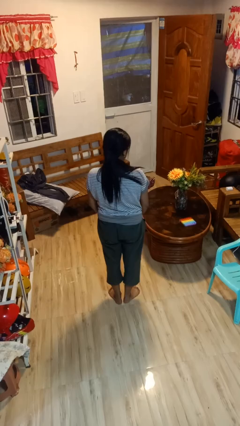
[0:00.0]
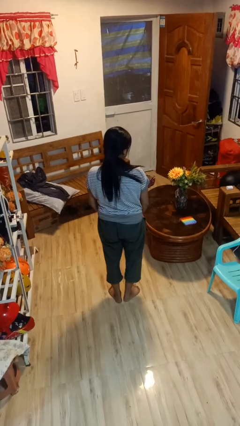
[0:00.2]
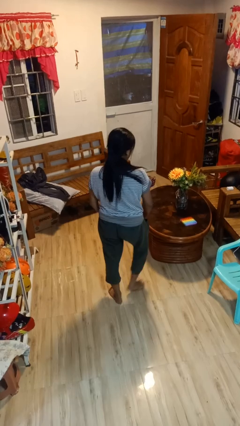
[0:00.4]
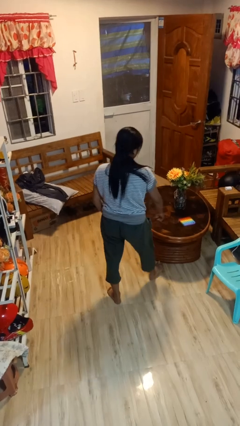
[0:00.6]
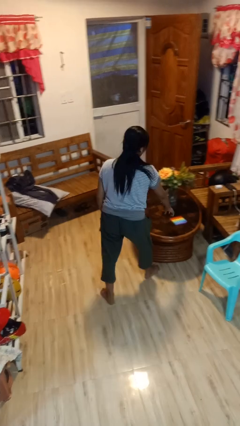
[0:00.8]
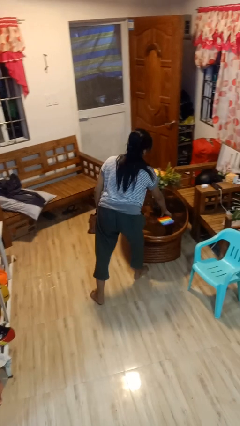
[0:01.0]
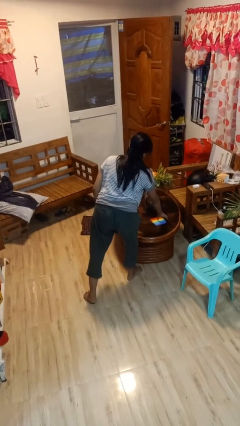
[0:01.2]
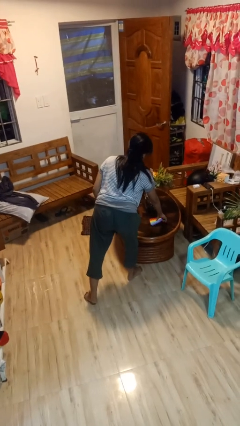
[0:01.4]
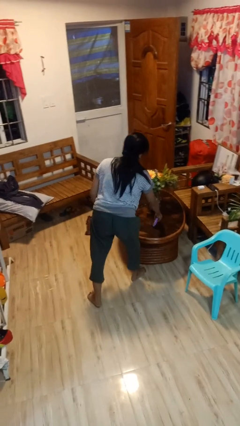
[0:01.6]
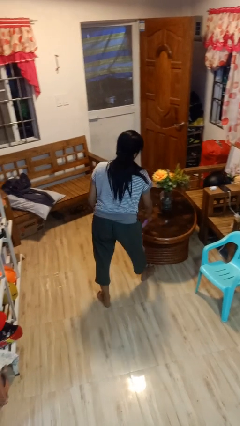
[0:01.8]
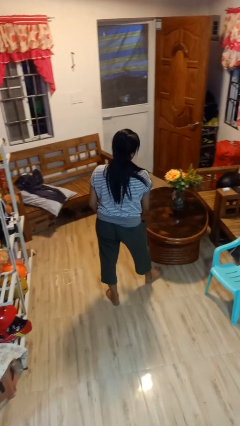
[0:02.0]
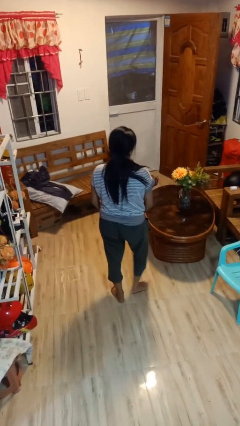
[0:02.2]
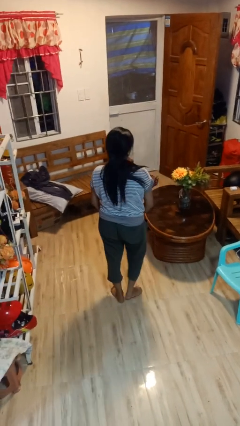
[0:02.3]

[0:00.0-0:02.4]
person picks up object from table

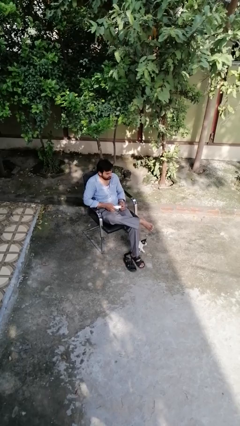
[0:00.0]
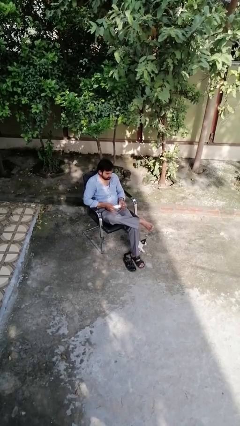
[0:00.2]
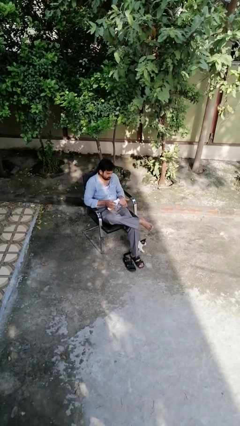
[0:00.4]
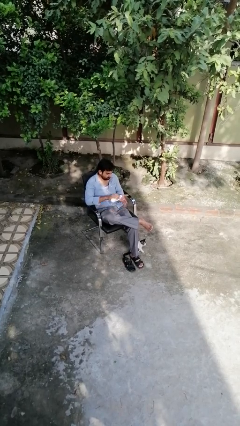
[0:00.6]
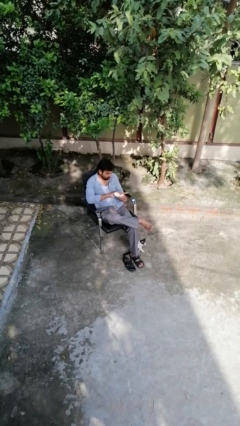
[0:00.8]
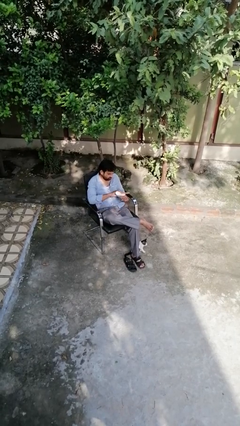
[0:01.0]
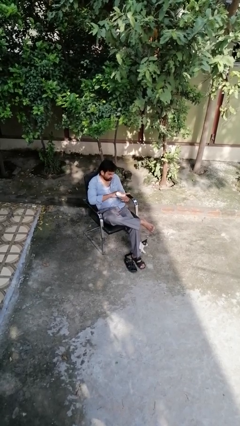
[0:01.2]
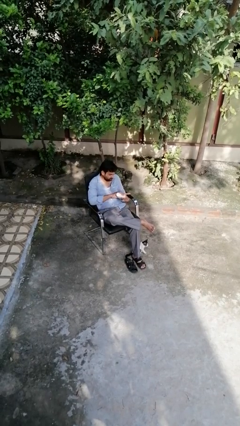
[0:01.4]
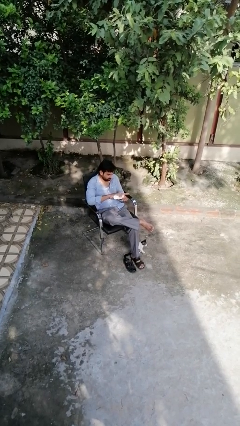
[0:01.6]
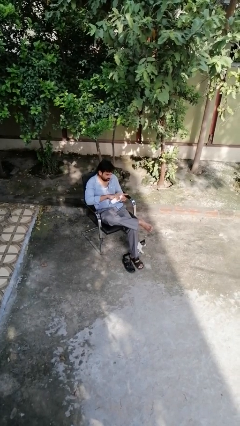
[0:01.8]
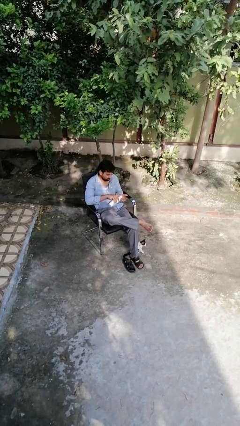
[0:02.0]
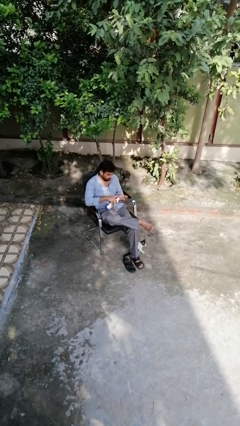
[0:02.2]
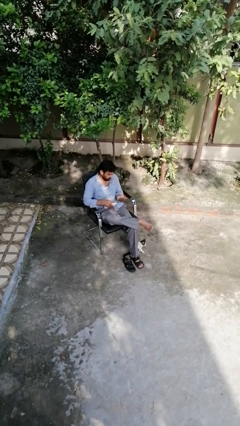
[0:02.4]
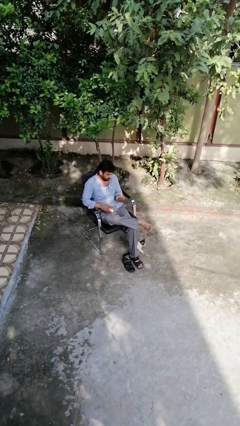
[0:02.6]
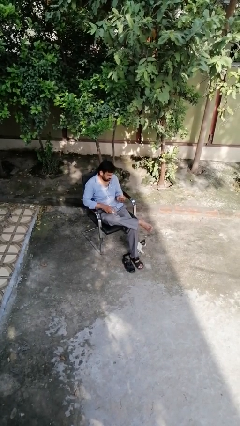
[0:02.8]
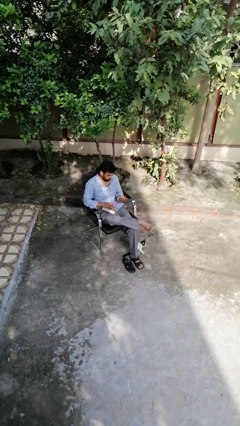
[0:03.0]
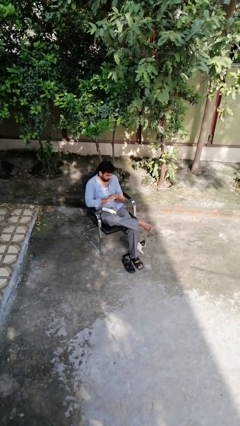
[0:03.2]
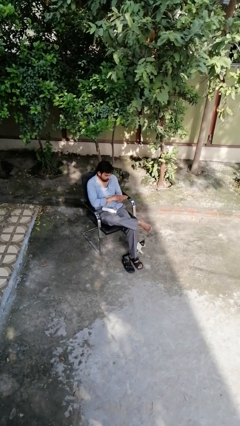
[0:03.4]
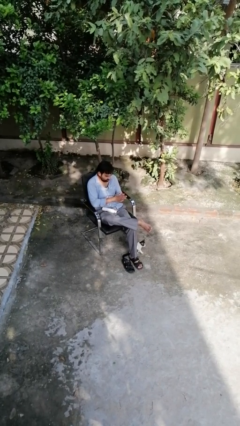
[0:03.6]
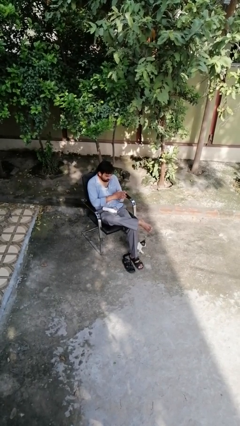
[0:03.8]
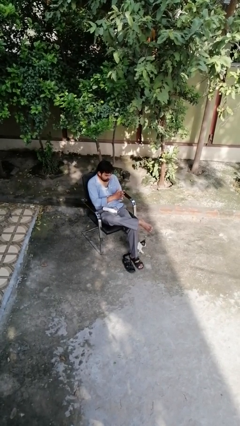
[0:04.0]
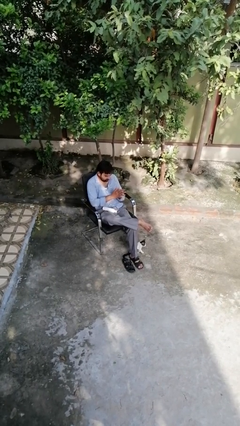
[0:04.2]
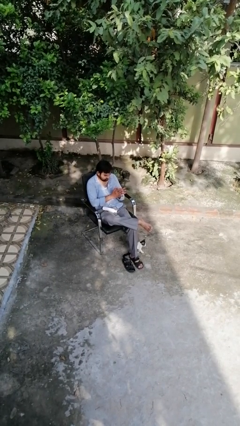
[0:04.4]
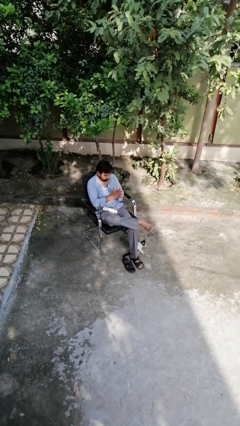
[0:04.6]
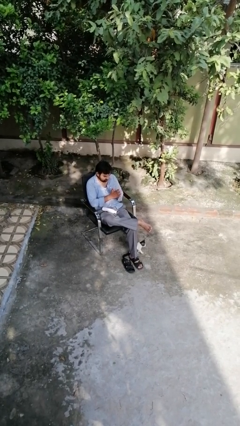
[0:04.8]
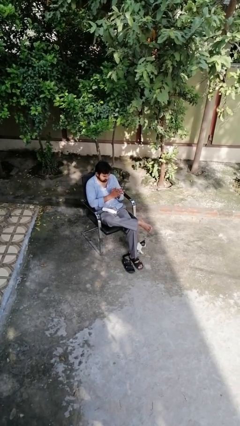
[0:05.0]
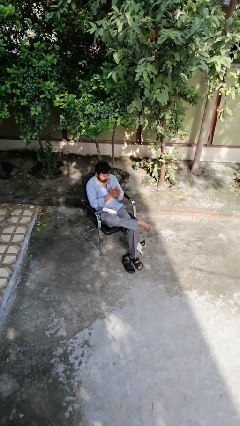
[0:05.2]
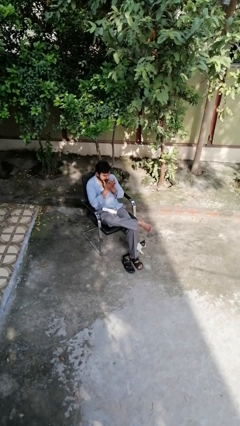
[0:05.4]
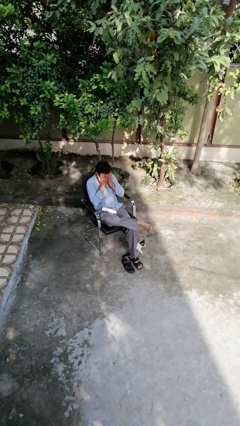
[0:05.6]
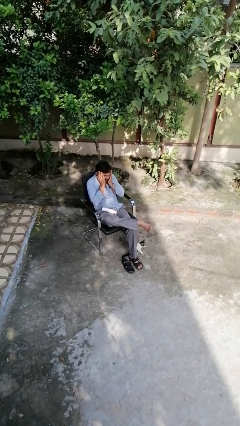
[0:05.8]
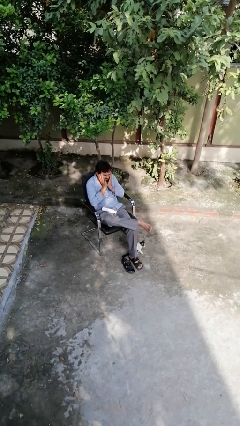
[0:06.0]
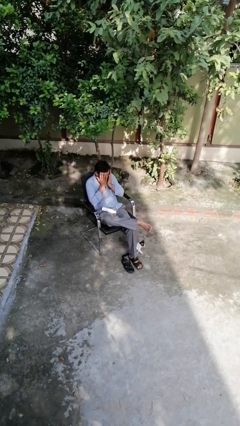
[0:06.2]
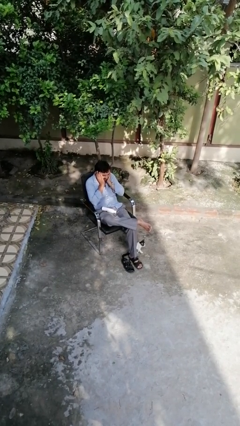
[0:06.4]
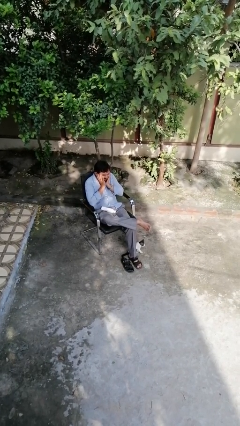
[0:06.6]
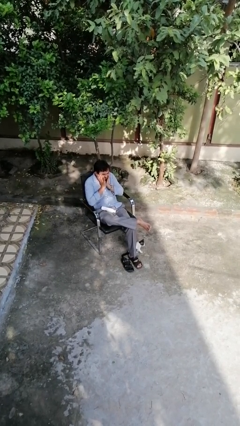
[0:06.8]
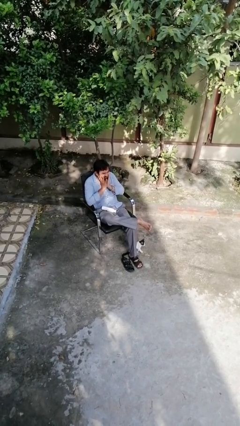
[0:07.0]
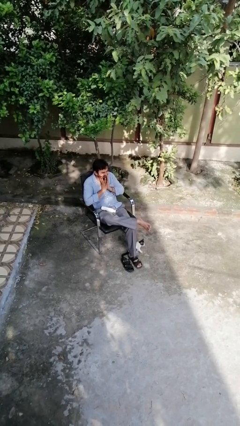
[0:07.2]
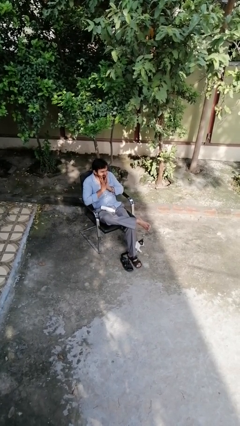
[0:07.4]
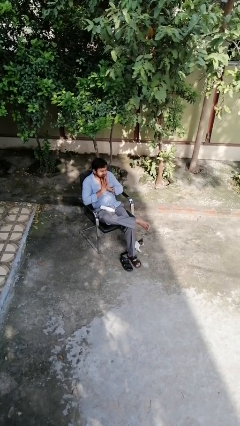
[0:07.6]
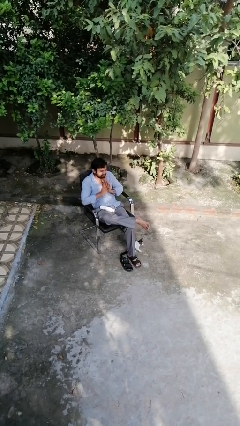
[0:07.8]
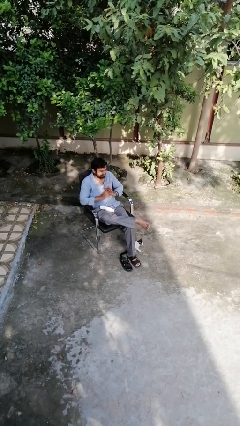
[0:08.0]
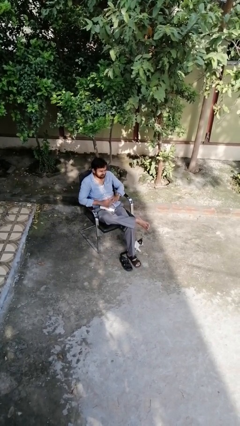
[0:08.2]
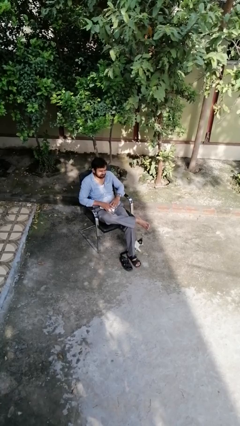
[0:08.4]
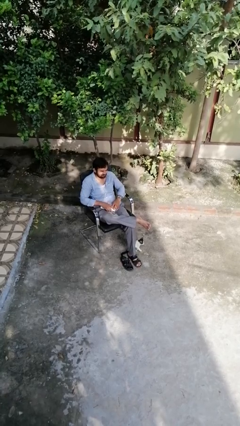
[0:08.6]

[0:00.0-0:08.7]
person applies facial moisturizer

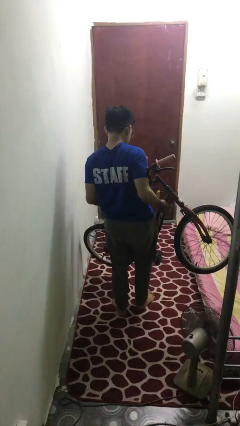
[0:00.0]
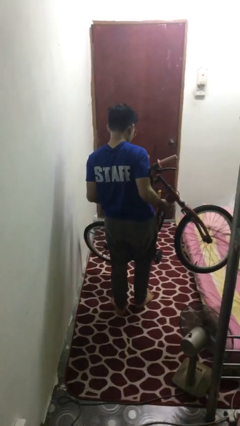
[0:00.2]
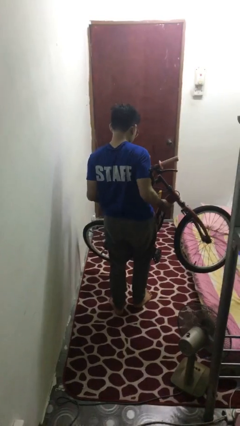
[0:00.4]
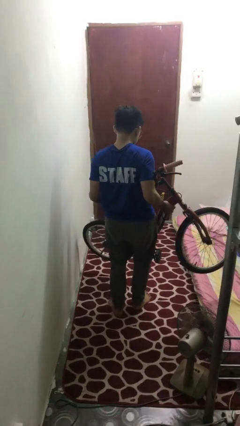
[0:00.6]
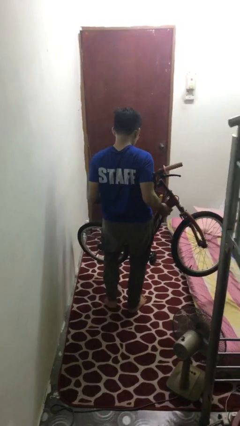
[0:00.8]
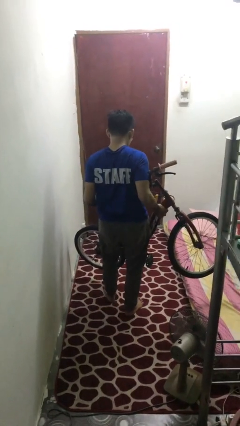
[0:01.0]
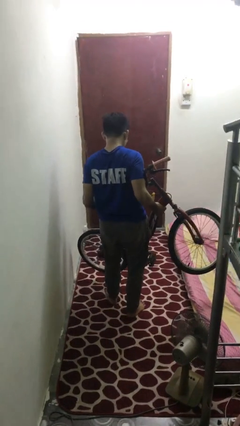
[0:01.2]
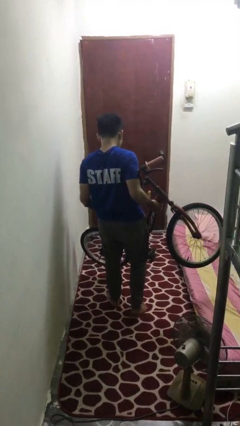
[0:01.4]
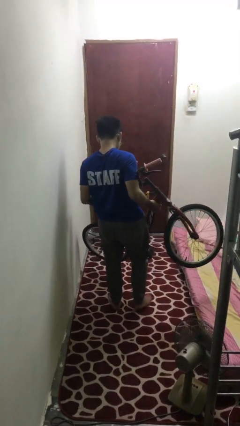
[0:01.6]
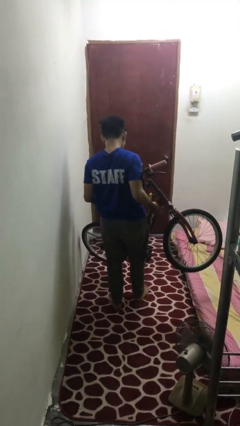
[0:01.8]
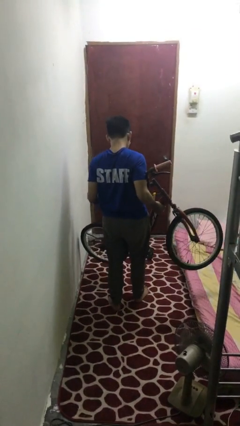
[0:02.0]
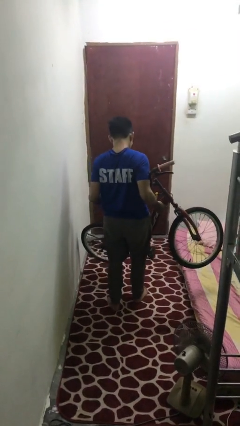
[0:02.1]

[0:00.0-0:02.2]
person carries bicycle

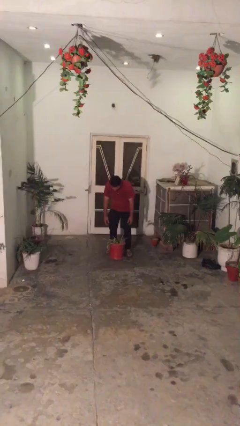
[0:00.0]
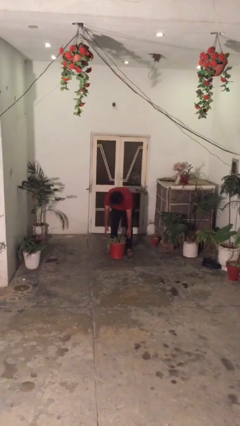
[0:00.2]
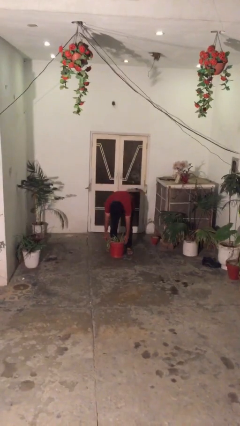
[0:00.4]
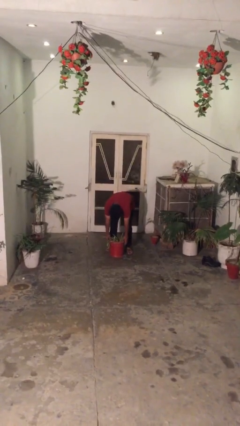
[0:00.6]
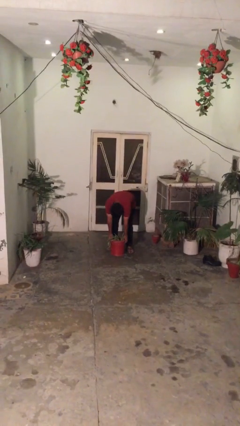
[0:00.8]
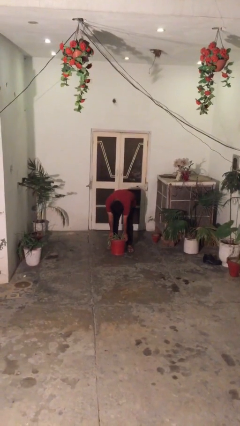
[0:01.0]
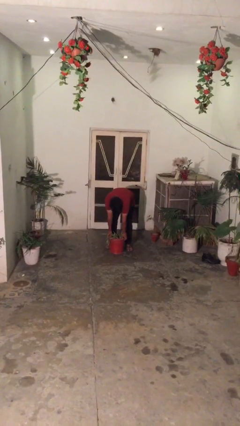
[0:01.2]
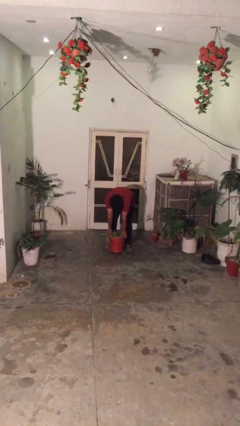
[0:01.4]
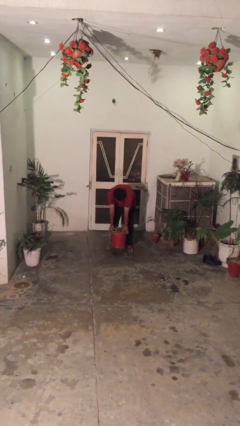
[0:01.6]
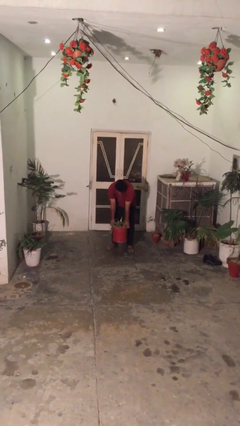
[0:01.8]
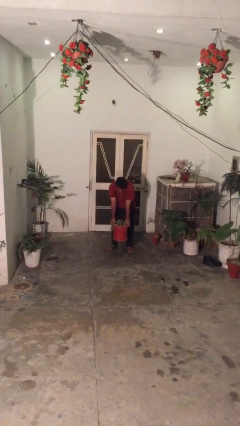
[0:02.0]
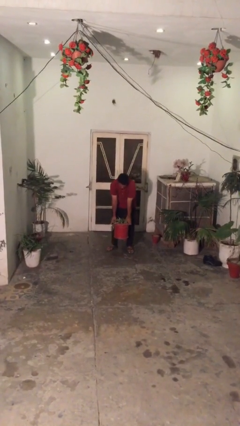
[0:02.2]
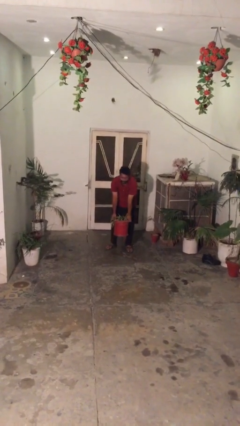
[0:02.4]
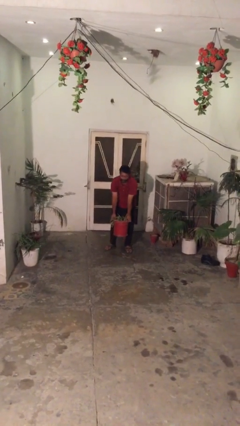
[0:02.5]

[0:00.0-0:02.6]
person picks up object from floor

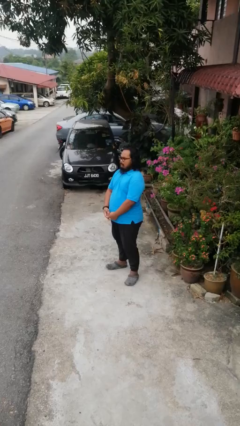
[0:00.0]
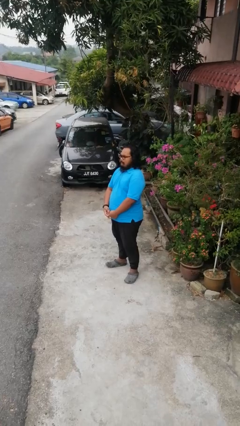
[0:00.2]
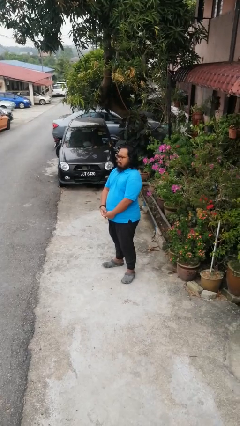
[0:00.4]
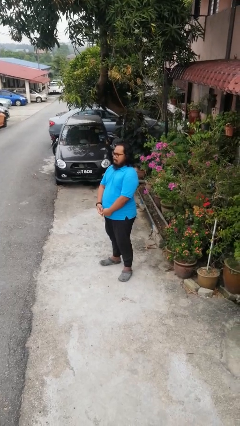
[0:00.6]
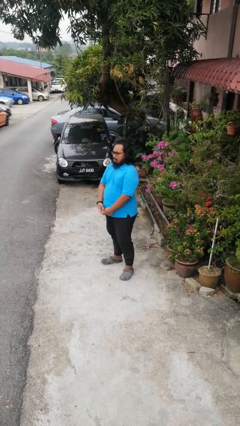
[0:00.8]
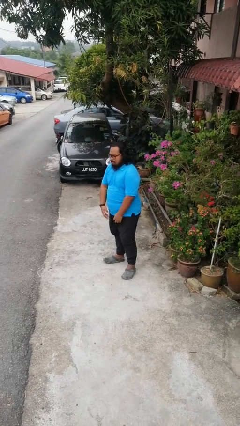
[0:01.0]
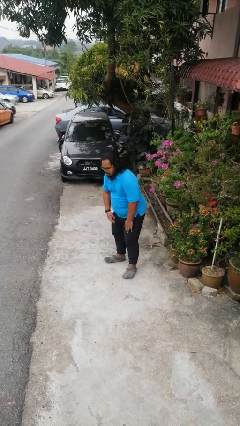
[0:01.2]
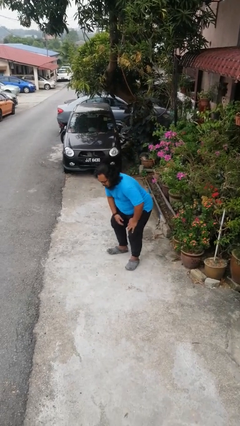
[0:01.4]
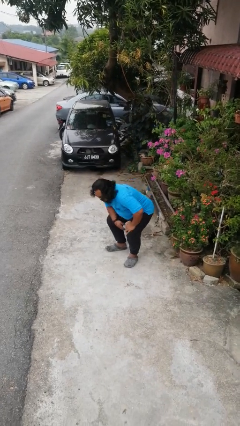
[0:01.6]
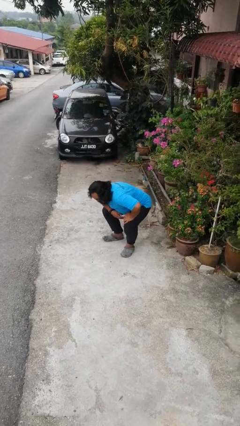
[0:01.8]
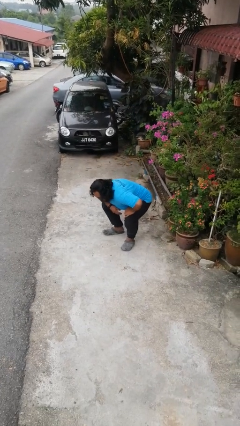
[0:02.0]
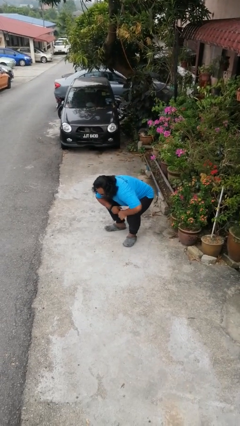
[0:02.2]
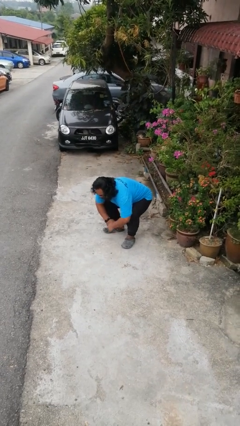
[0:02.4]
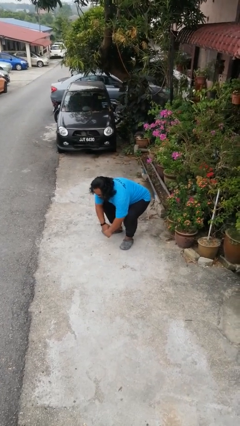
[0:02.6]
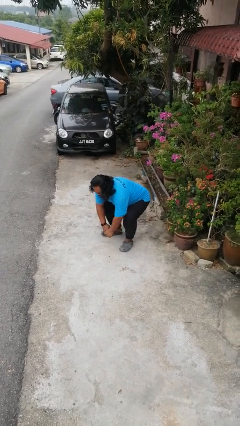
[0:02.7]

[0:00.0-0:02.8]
person squats
